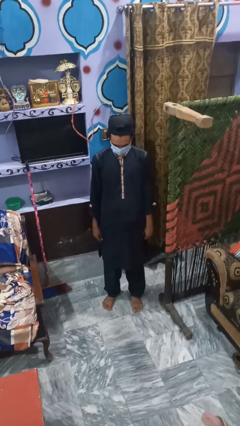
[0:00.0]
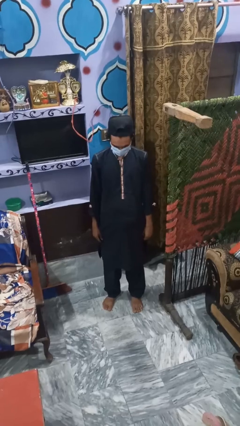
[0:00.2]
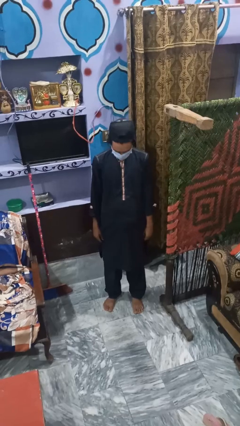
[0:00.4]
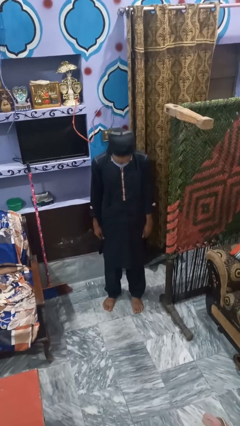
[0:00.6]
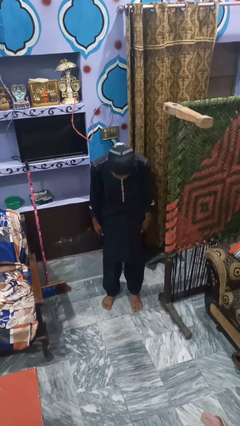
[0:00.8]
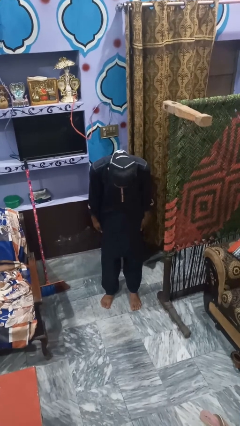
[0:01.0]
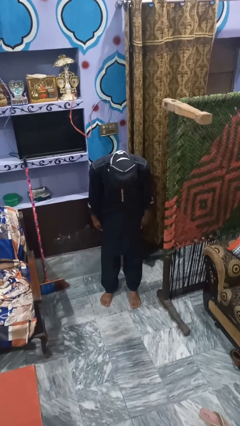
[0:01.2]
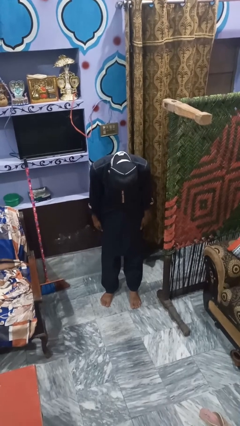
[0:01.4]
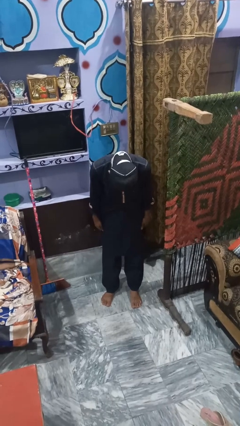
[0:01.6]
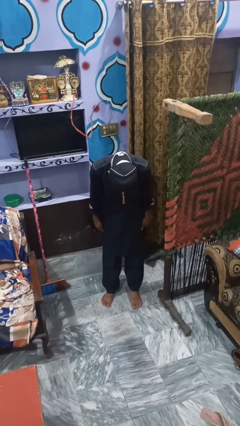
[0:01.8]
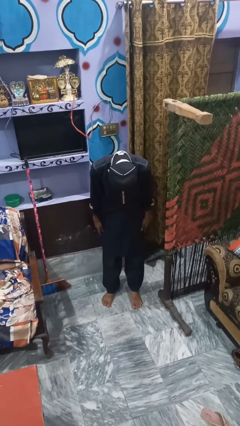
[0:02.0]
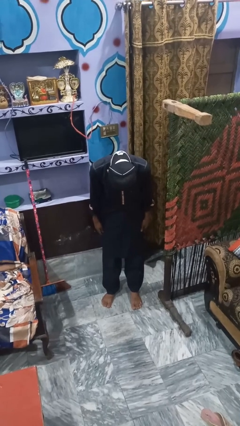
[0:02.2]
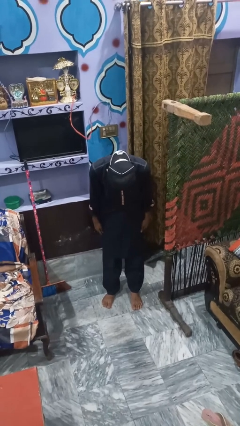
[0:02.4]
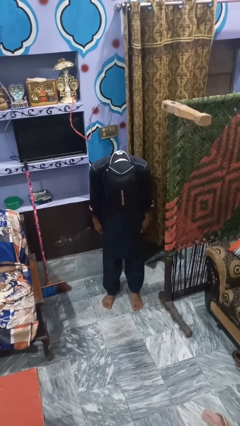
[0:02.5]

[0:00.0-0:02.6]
person bows

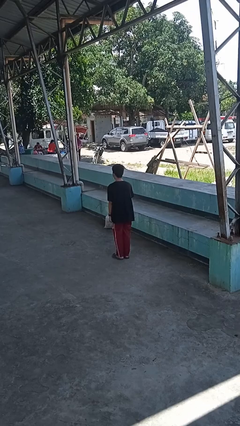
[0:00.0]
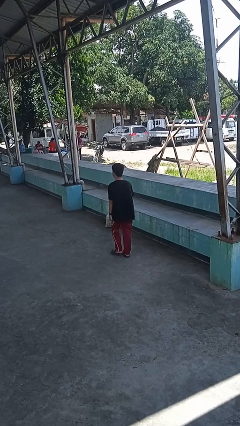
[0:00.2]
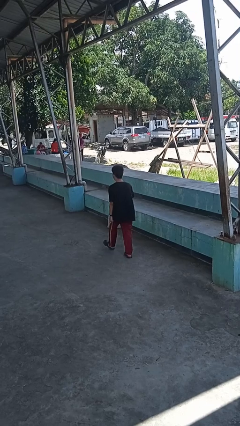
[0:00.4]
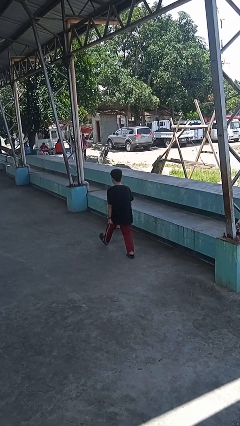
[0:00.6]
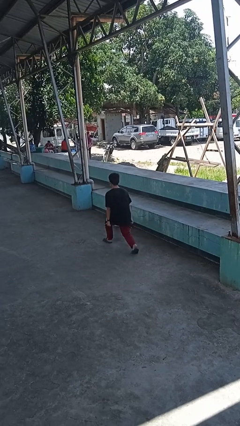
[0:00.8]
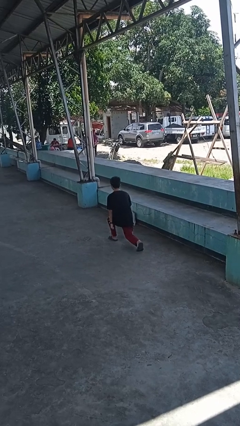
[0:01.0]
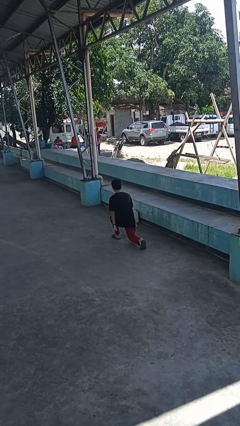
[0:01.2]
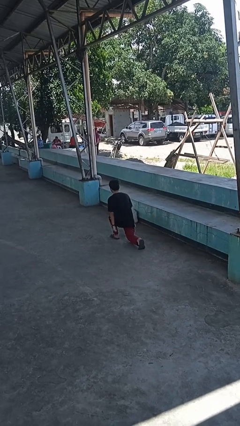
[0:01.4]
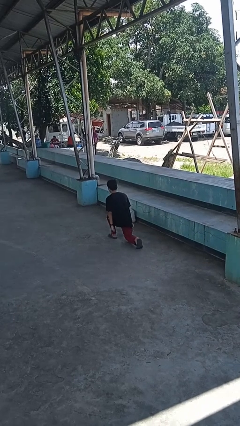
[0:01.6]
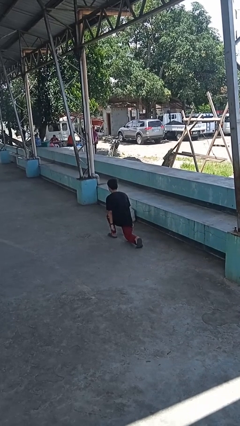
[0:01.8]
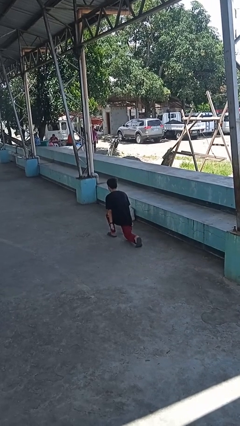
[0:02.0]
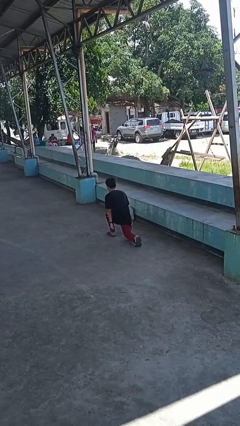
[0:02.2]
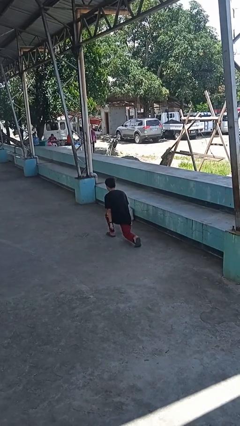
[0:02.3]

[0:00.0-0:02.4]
person exercises with lunges

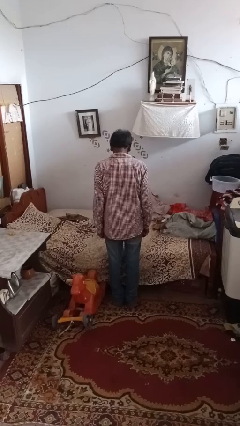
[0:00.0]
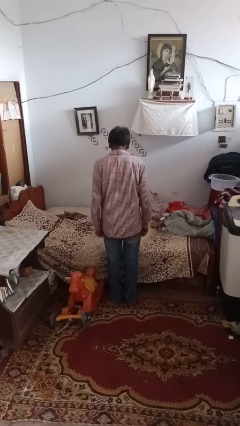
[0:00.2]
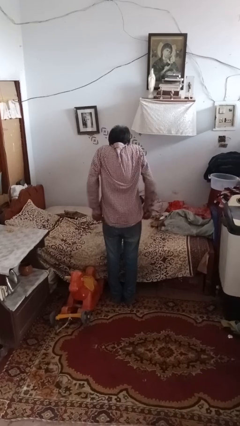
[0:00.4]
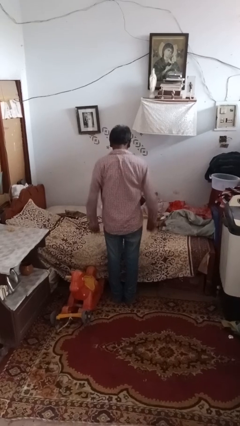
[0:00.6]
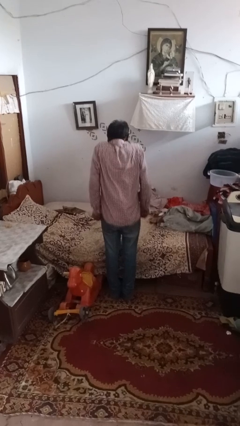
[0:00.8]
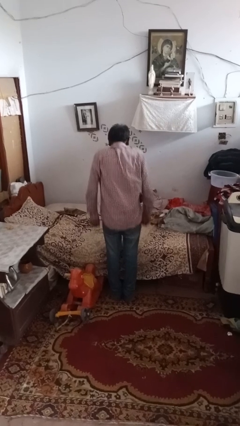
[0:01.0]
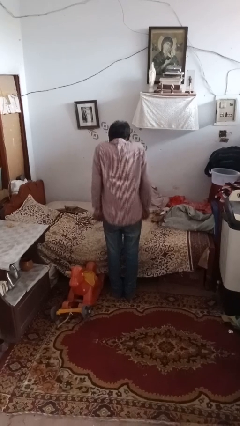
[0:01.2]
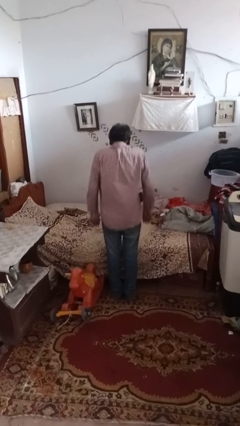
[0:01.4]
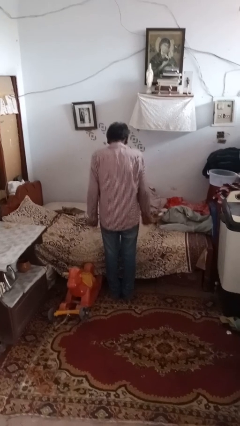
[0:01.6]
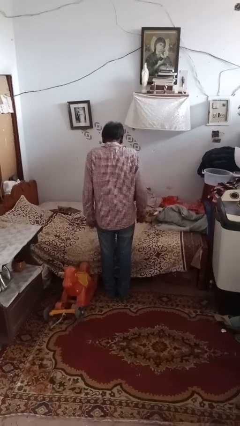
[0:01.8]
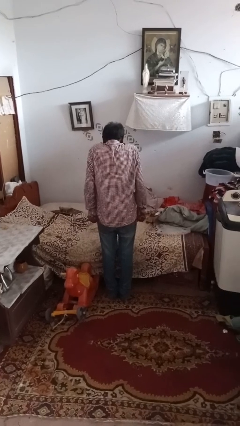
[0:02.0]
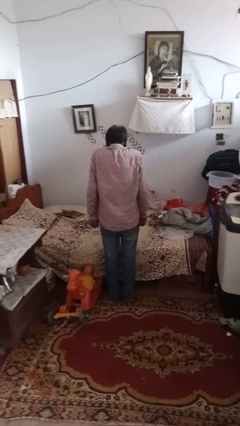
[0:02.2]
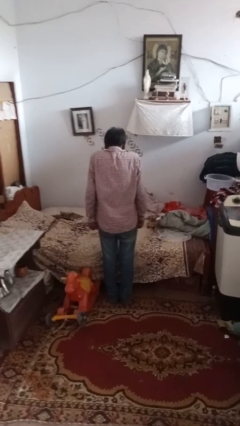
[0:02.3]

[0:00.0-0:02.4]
person shrugs

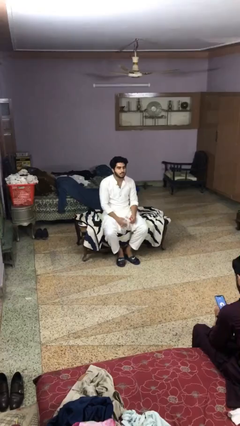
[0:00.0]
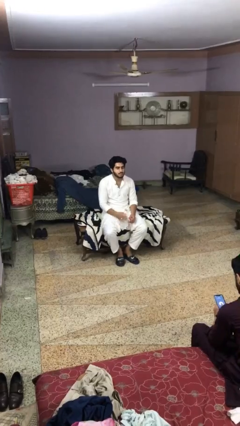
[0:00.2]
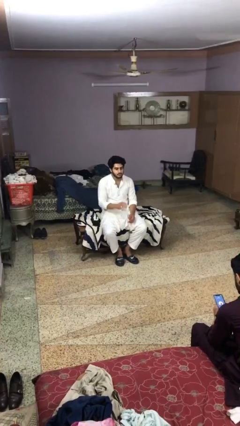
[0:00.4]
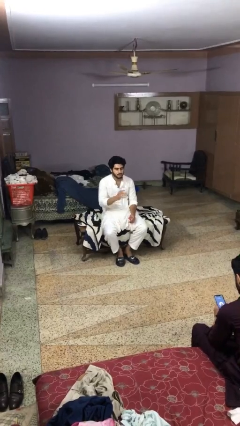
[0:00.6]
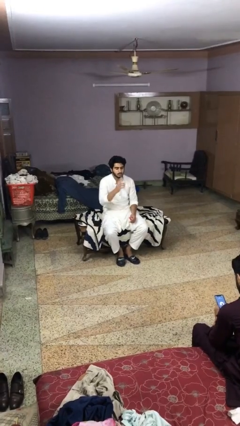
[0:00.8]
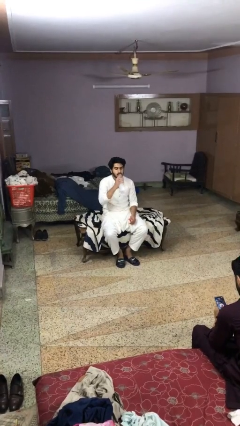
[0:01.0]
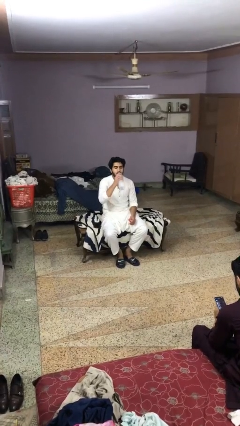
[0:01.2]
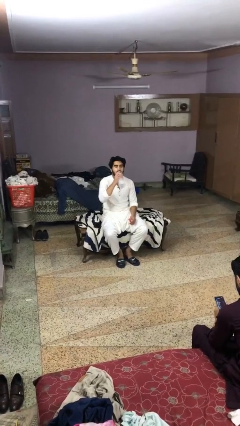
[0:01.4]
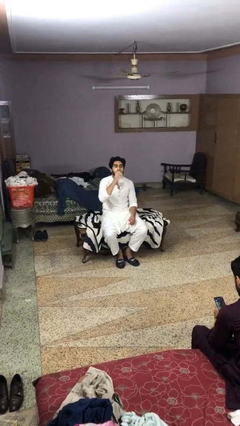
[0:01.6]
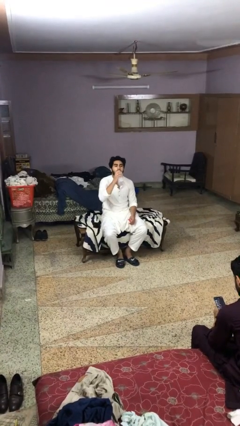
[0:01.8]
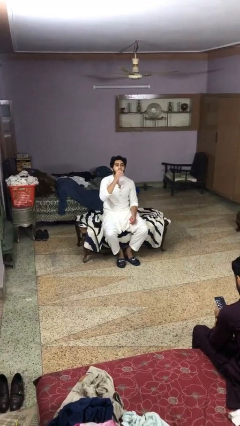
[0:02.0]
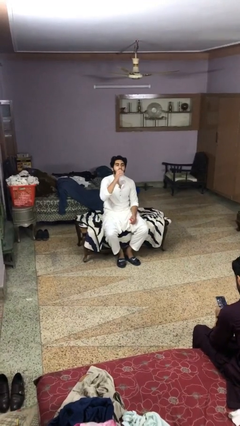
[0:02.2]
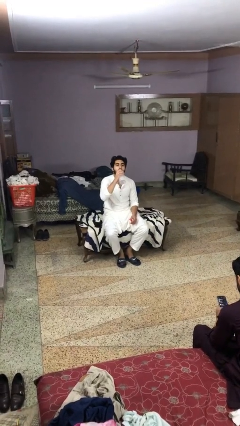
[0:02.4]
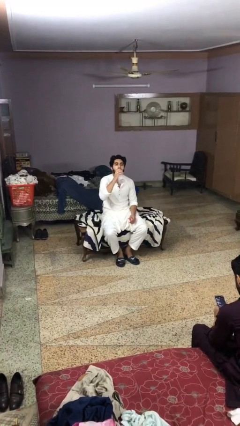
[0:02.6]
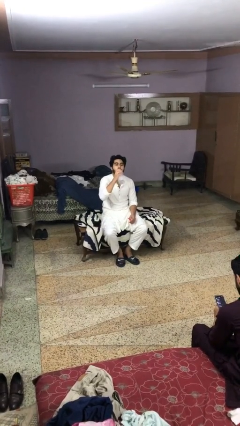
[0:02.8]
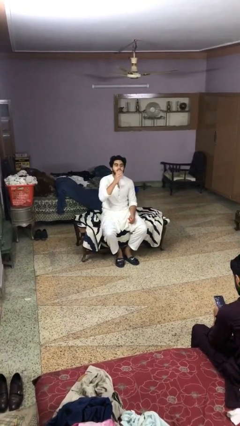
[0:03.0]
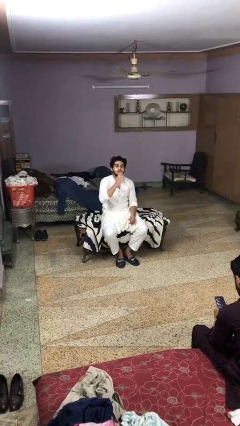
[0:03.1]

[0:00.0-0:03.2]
person drinks from bottle

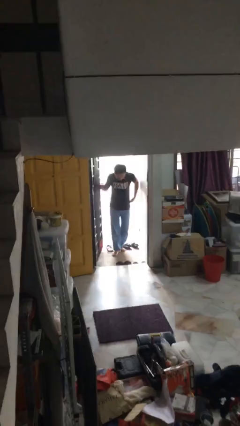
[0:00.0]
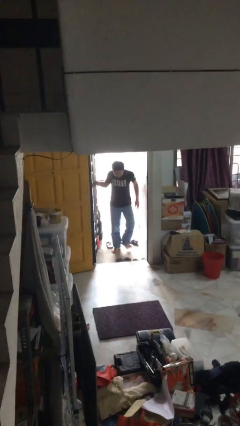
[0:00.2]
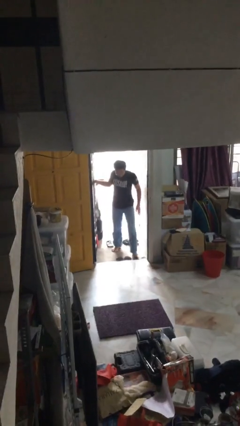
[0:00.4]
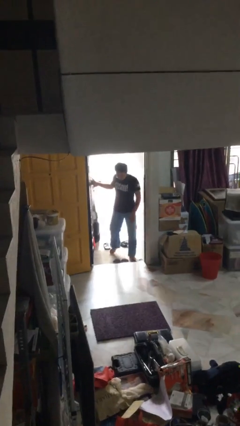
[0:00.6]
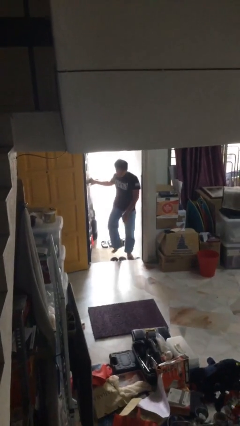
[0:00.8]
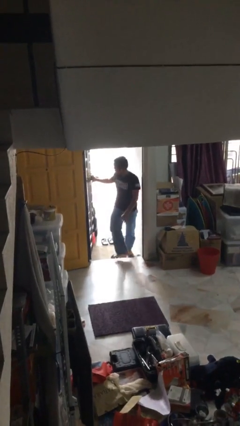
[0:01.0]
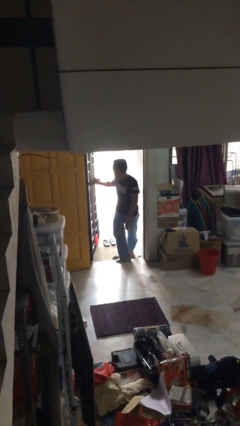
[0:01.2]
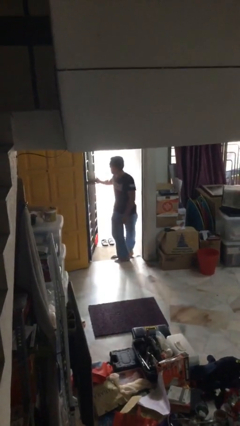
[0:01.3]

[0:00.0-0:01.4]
person enters scene through structure

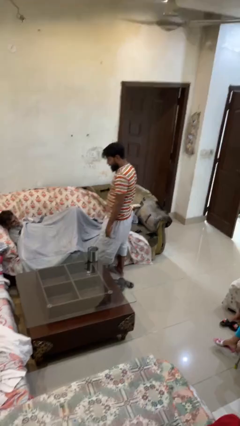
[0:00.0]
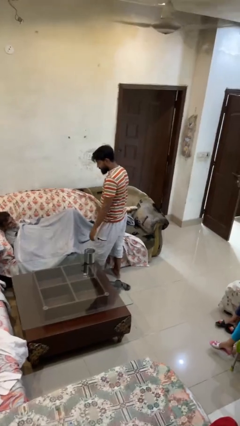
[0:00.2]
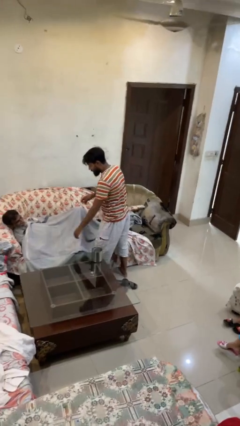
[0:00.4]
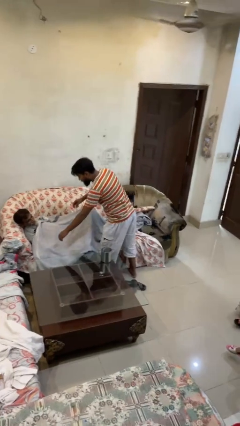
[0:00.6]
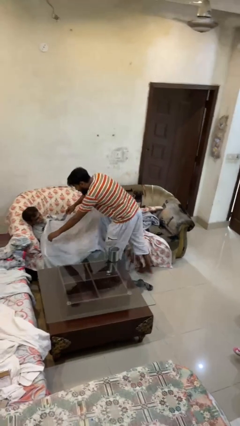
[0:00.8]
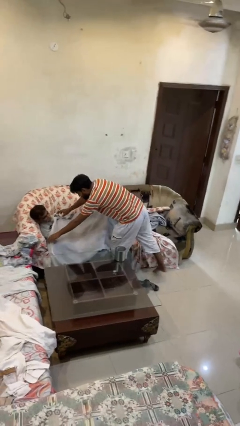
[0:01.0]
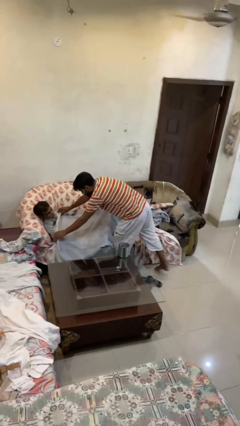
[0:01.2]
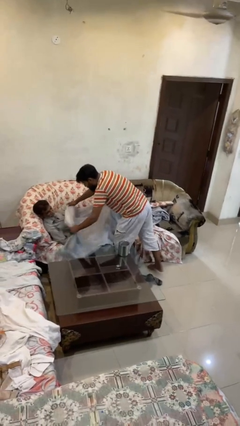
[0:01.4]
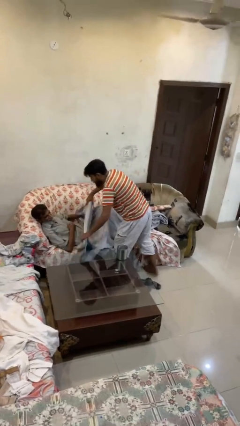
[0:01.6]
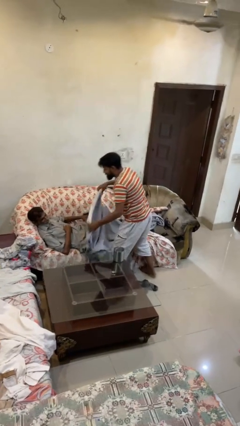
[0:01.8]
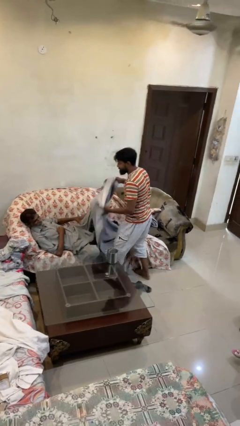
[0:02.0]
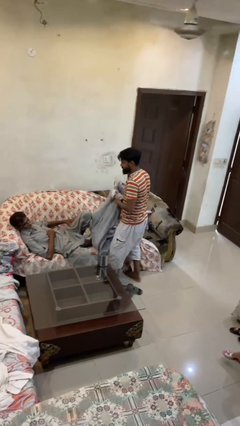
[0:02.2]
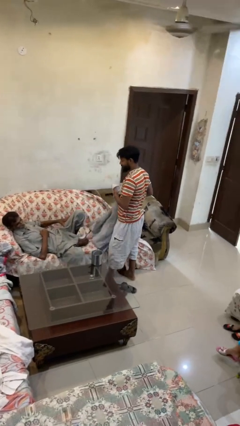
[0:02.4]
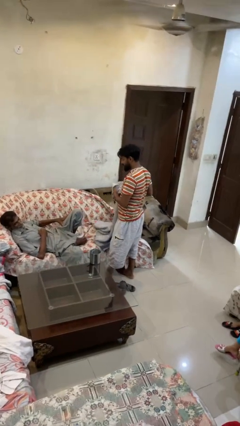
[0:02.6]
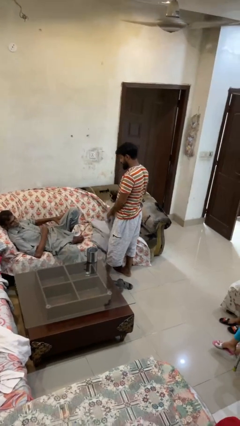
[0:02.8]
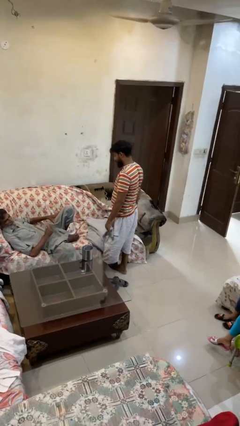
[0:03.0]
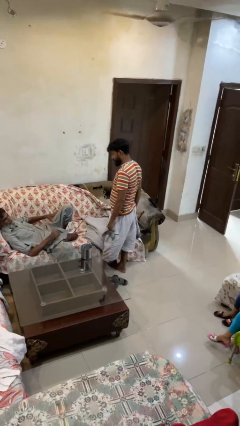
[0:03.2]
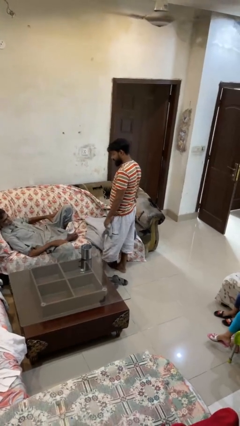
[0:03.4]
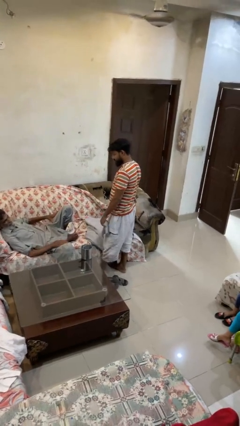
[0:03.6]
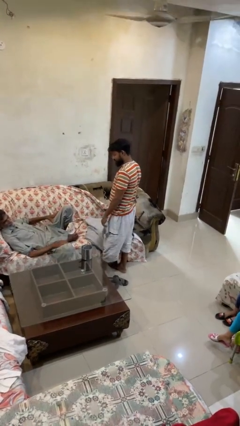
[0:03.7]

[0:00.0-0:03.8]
person uncovers friend with blanket

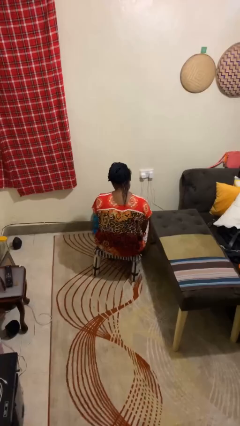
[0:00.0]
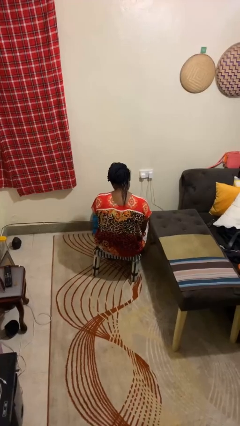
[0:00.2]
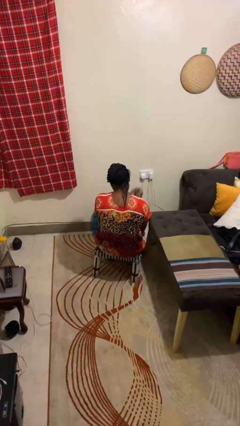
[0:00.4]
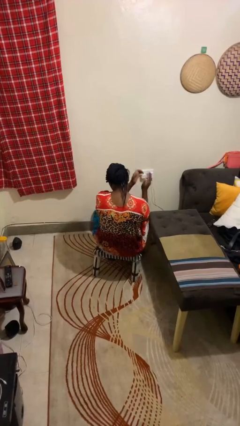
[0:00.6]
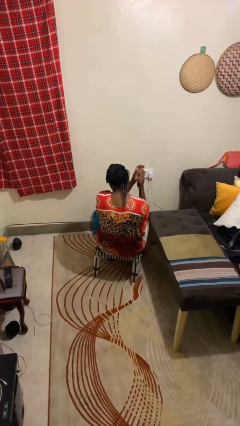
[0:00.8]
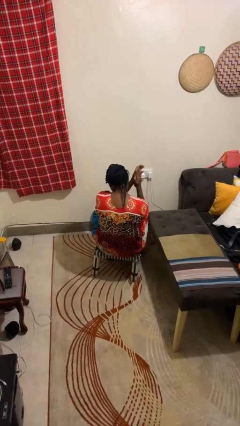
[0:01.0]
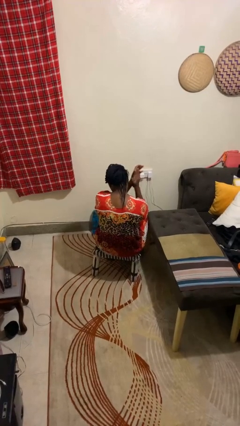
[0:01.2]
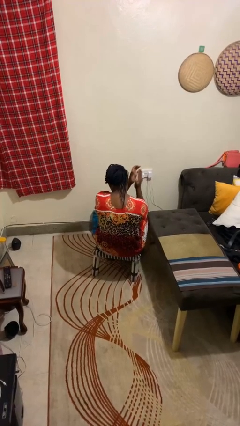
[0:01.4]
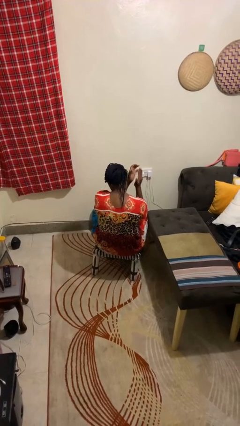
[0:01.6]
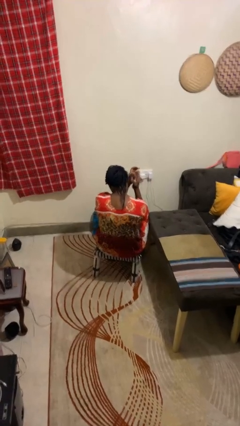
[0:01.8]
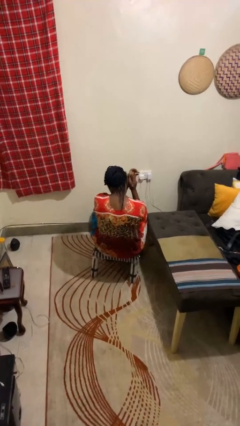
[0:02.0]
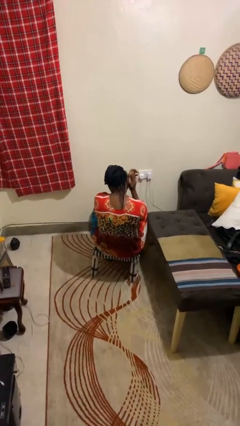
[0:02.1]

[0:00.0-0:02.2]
person claps hands
